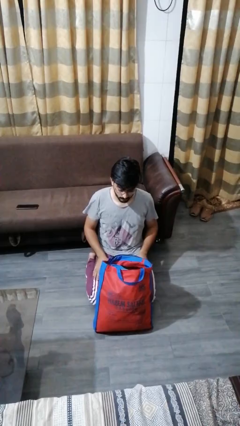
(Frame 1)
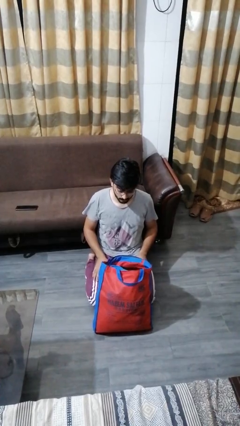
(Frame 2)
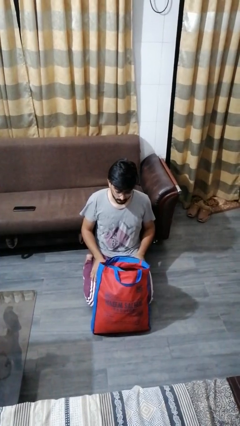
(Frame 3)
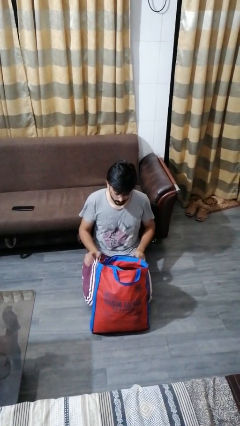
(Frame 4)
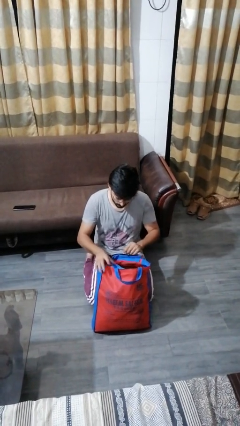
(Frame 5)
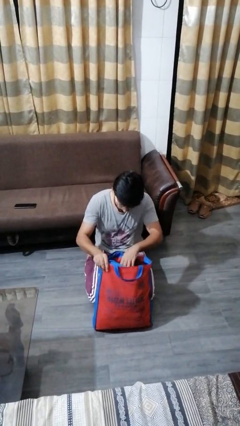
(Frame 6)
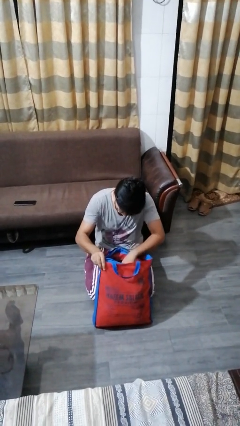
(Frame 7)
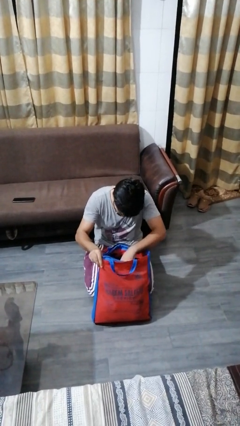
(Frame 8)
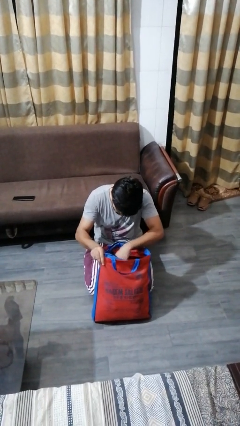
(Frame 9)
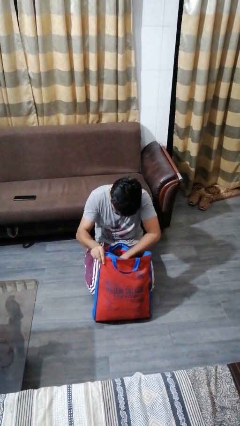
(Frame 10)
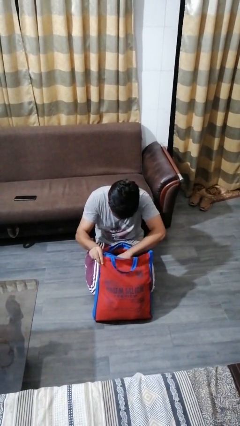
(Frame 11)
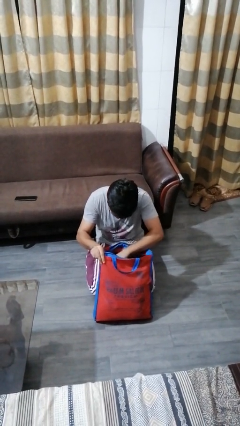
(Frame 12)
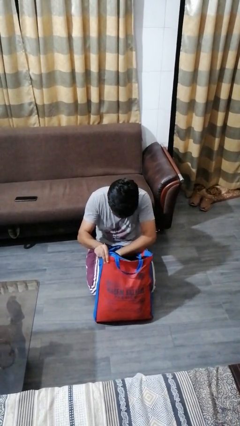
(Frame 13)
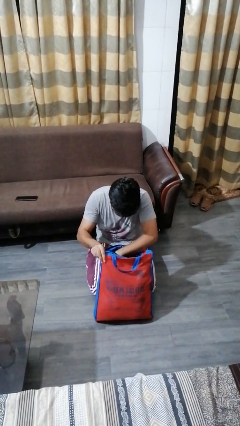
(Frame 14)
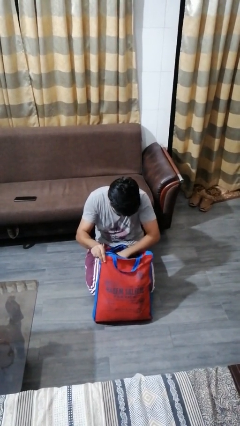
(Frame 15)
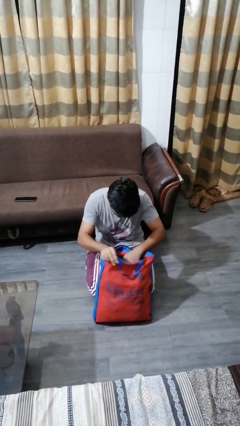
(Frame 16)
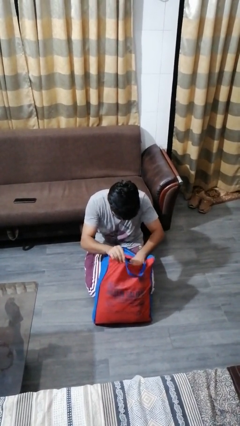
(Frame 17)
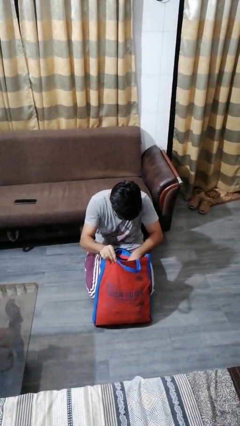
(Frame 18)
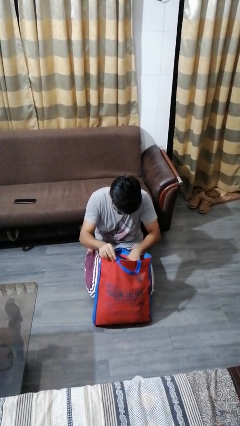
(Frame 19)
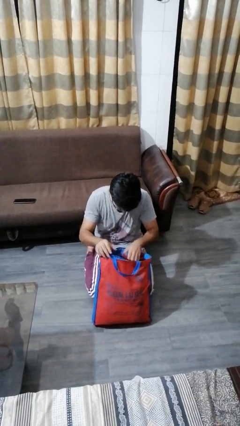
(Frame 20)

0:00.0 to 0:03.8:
person searches in bag

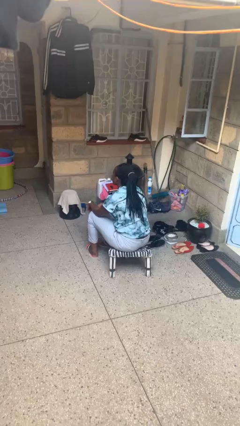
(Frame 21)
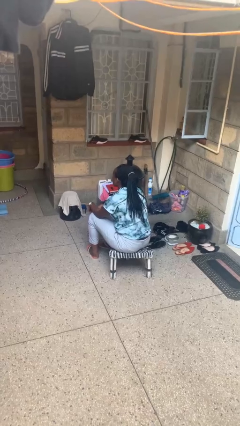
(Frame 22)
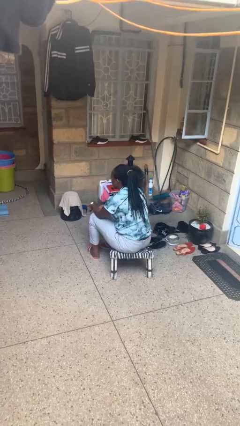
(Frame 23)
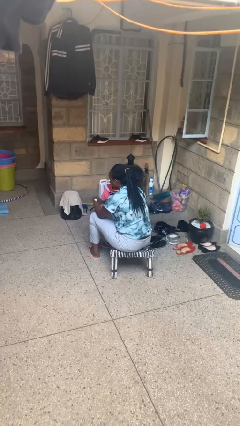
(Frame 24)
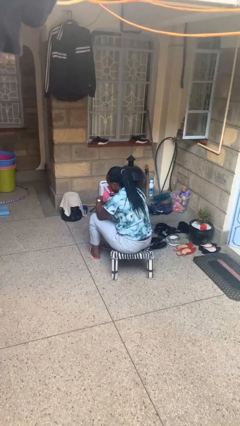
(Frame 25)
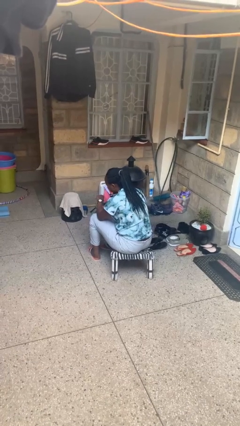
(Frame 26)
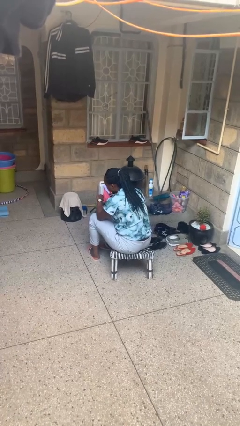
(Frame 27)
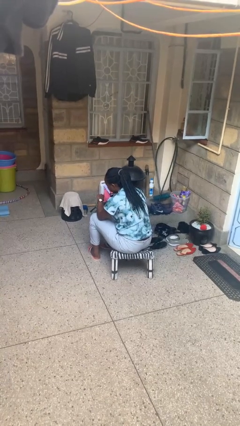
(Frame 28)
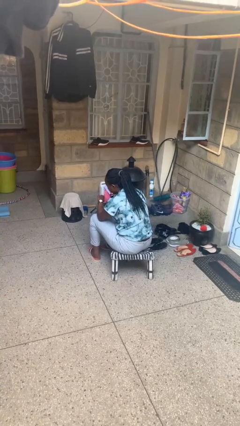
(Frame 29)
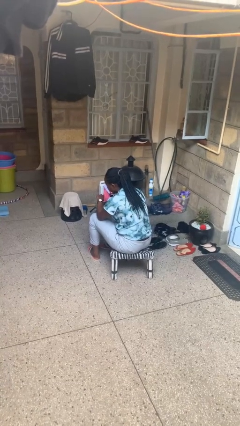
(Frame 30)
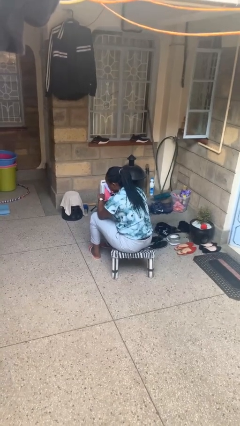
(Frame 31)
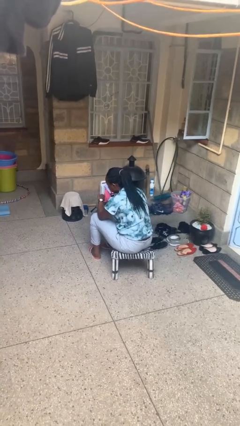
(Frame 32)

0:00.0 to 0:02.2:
person looks at wristwatch

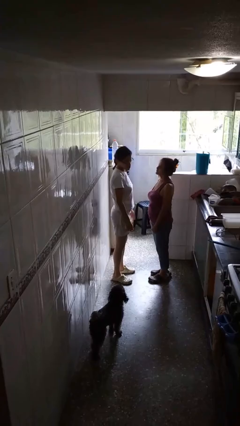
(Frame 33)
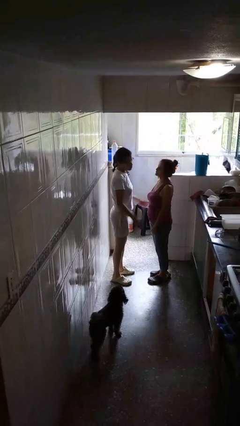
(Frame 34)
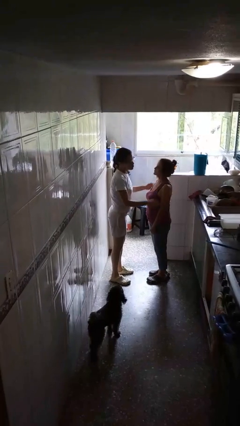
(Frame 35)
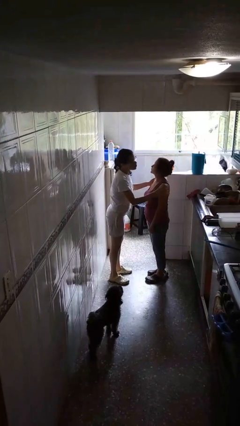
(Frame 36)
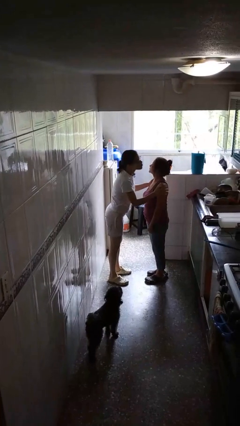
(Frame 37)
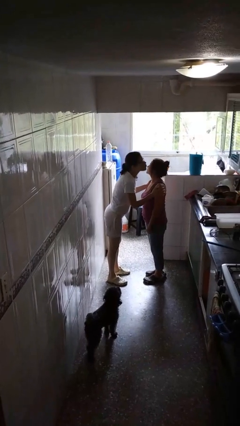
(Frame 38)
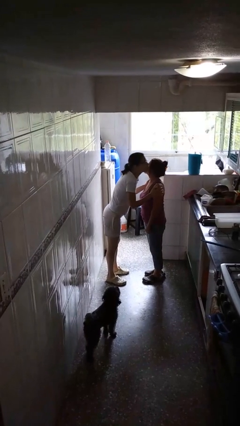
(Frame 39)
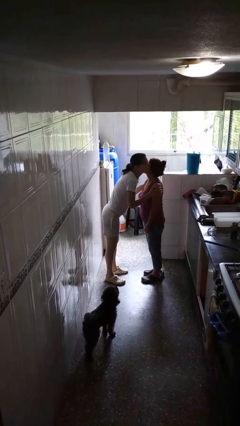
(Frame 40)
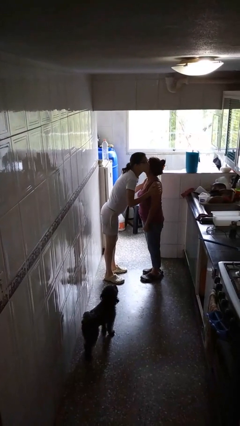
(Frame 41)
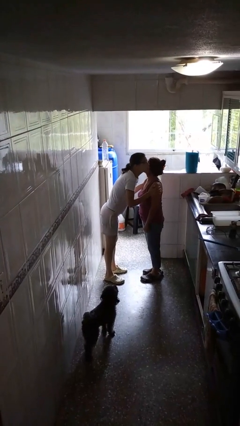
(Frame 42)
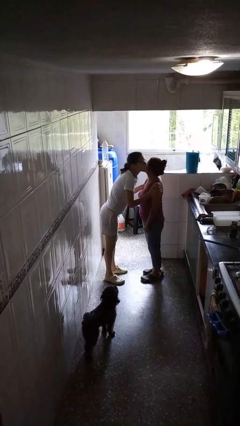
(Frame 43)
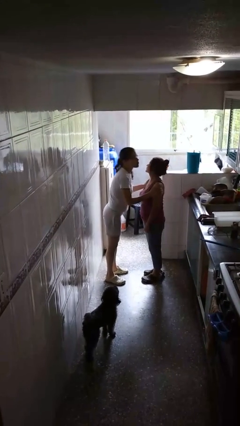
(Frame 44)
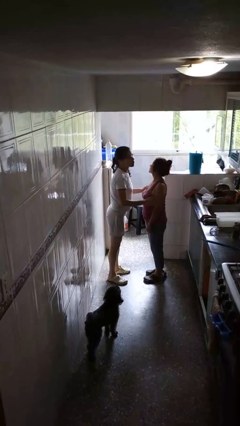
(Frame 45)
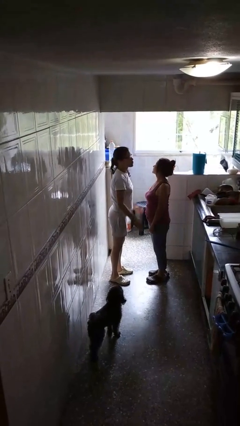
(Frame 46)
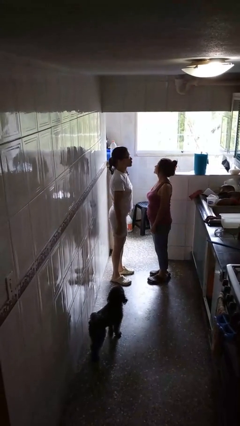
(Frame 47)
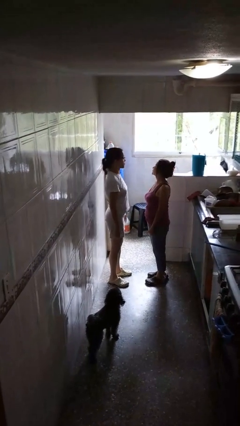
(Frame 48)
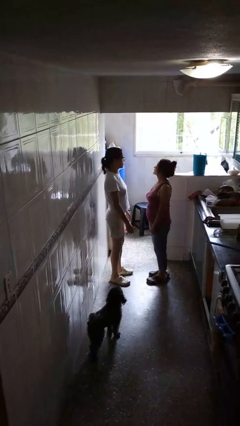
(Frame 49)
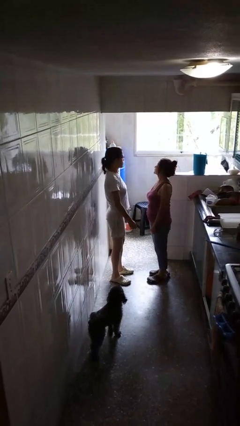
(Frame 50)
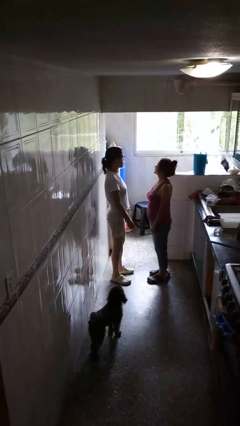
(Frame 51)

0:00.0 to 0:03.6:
person kisses cheek of person

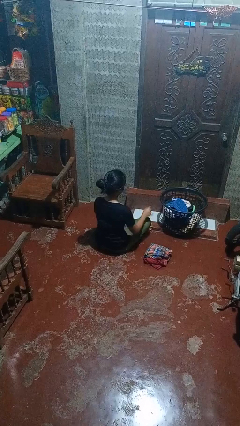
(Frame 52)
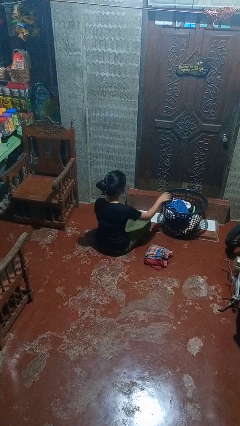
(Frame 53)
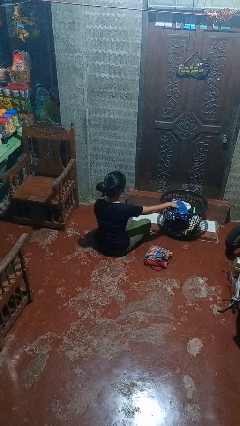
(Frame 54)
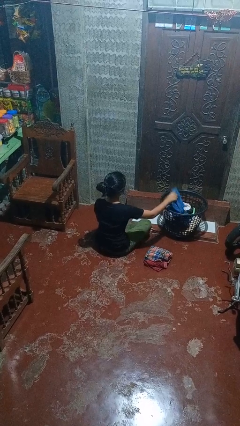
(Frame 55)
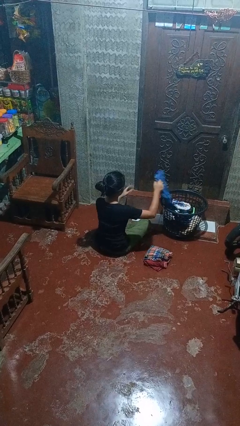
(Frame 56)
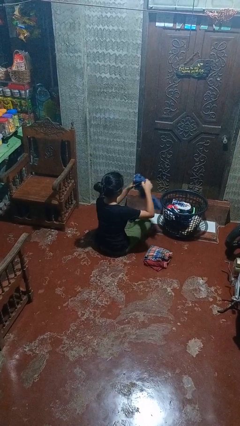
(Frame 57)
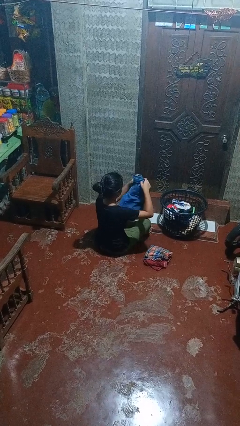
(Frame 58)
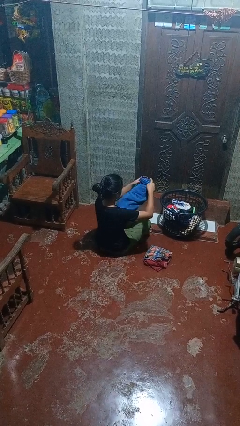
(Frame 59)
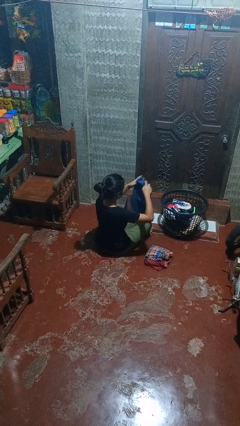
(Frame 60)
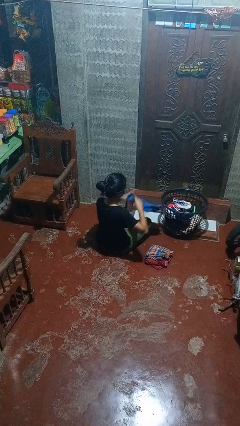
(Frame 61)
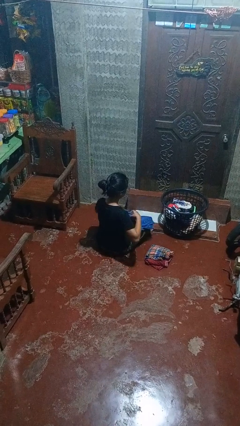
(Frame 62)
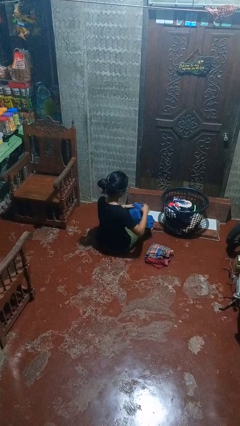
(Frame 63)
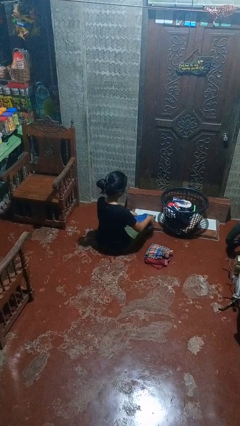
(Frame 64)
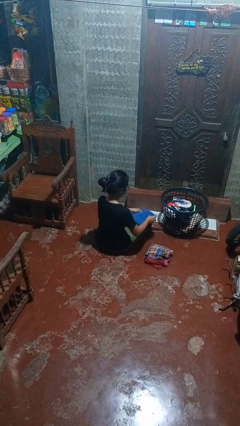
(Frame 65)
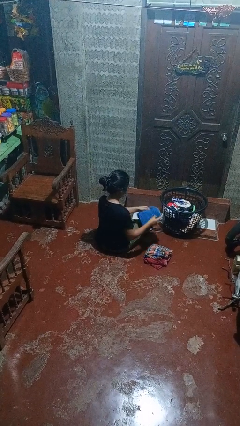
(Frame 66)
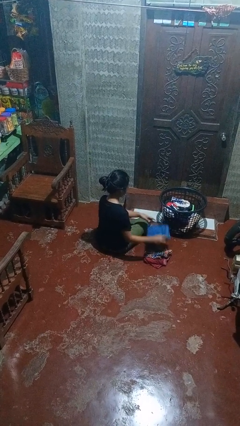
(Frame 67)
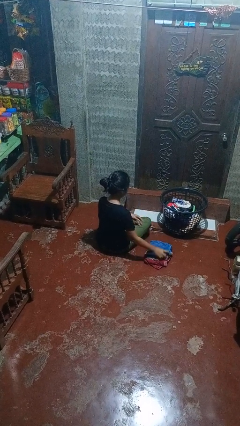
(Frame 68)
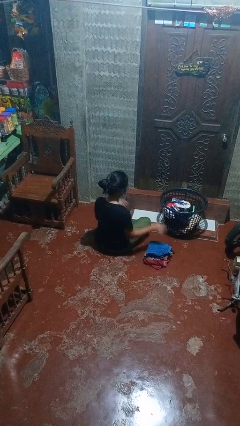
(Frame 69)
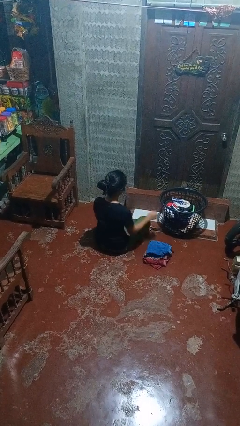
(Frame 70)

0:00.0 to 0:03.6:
person folds pants

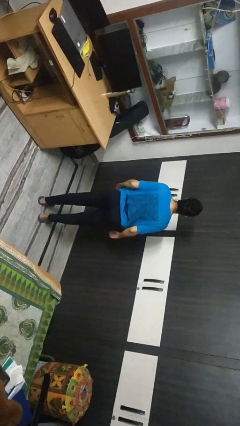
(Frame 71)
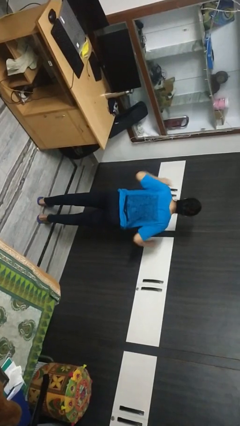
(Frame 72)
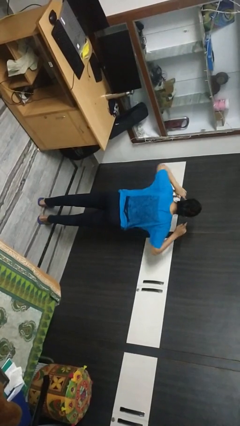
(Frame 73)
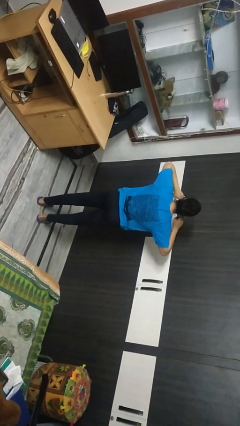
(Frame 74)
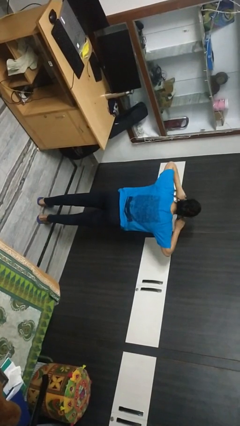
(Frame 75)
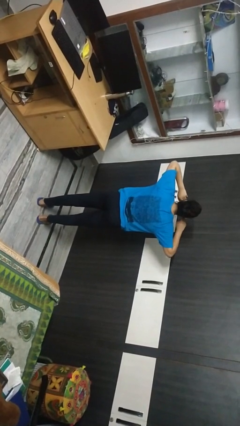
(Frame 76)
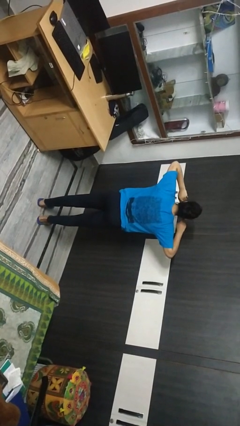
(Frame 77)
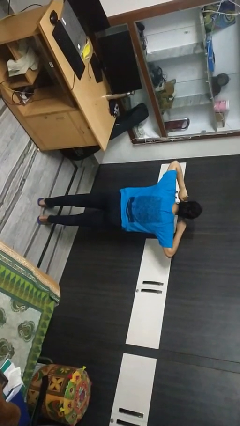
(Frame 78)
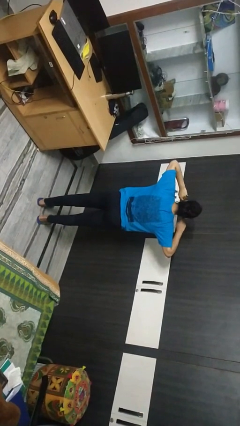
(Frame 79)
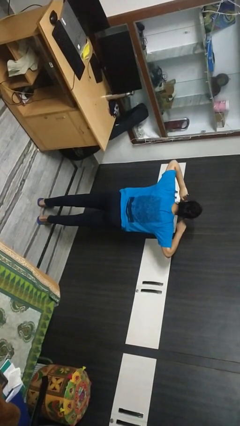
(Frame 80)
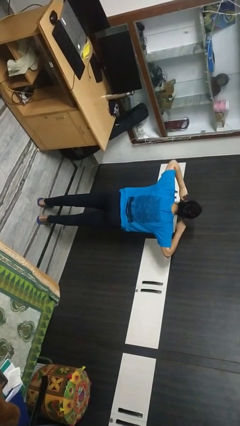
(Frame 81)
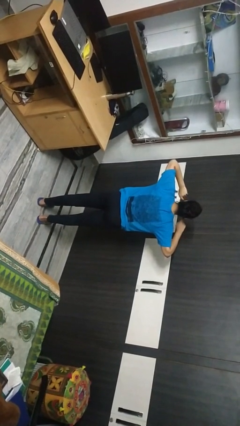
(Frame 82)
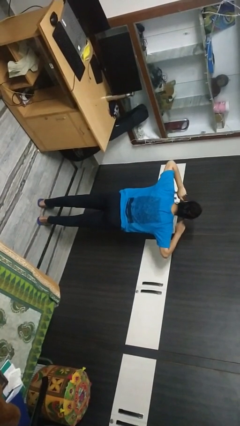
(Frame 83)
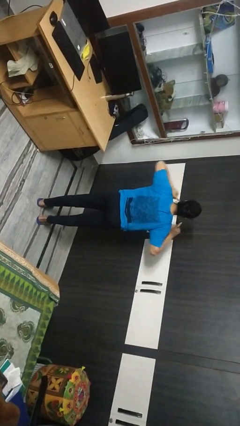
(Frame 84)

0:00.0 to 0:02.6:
person puts fingers in ear

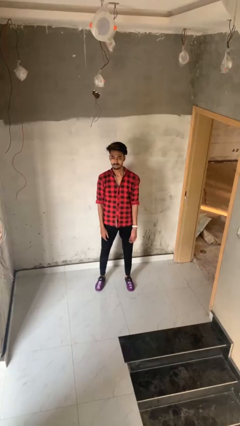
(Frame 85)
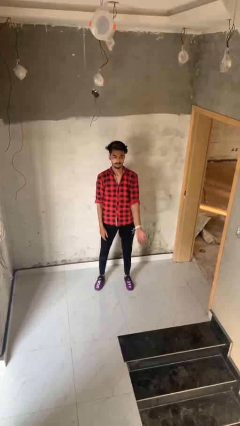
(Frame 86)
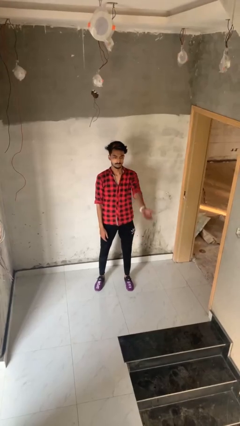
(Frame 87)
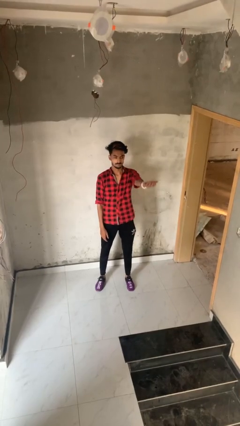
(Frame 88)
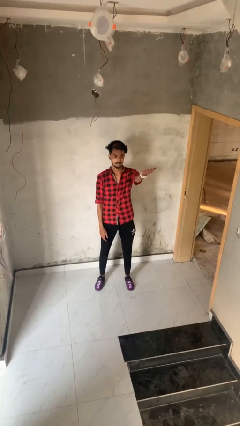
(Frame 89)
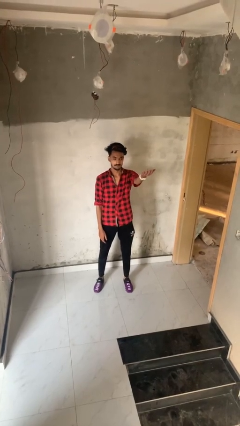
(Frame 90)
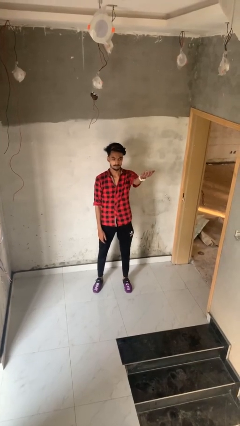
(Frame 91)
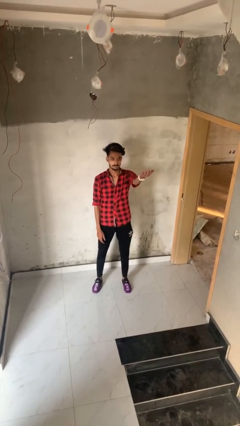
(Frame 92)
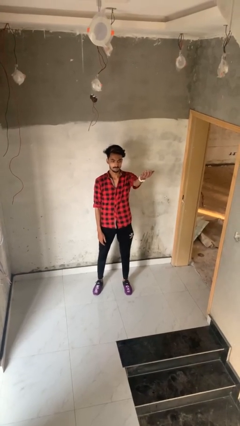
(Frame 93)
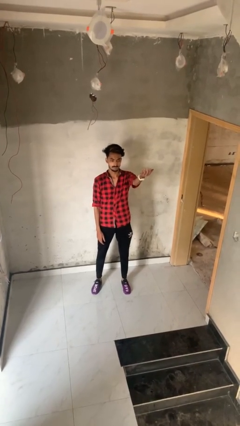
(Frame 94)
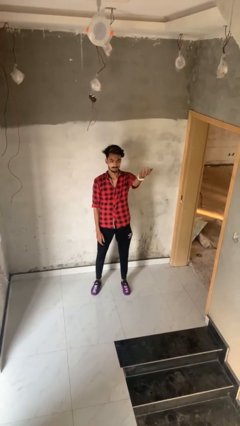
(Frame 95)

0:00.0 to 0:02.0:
person gestures swipe up
